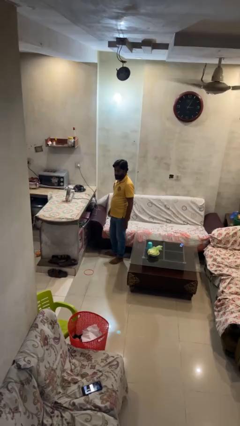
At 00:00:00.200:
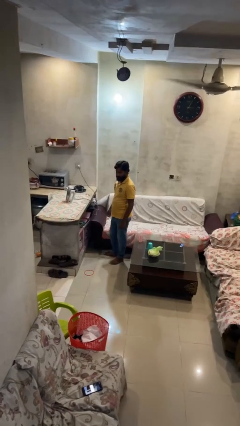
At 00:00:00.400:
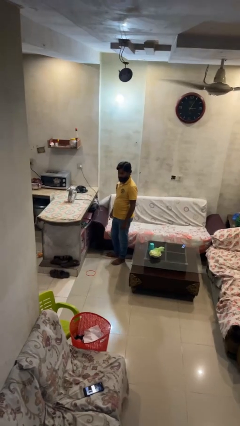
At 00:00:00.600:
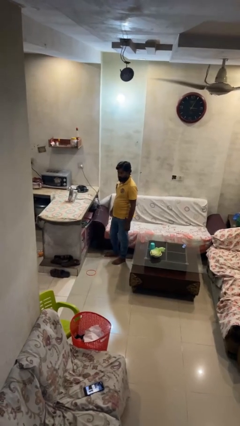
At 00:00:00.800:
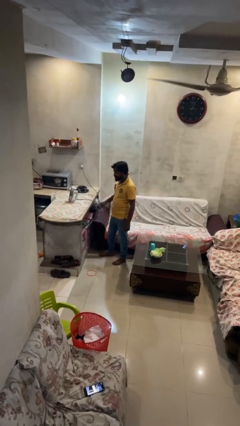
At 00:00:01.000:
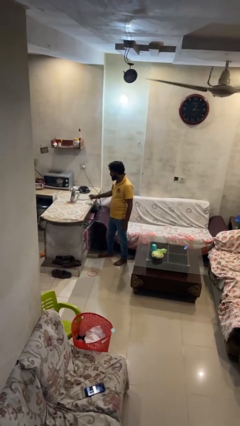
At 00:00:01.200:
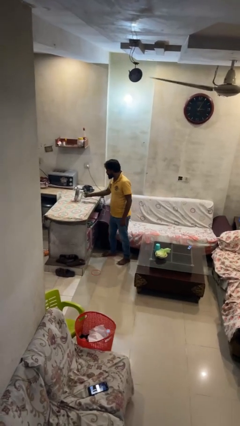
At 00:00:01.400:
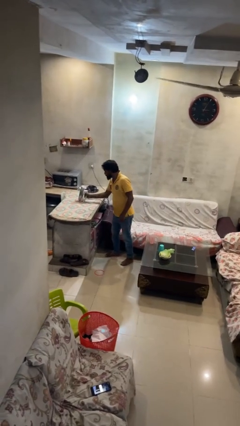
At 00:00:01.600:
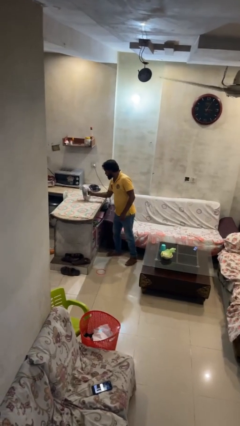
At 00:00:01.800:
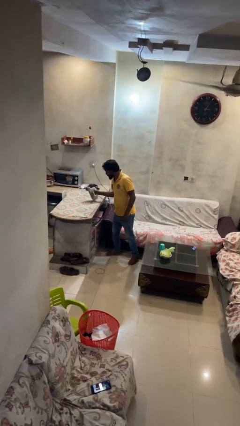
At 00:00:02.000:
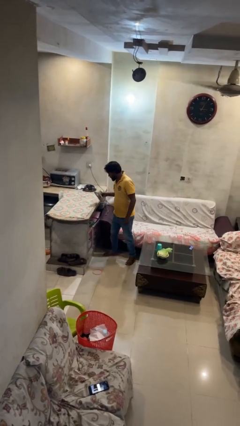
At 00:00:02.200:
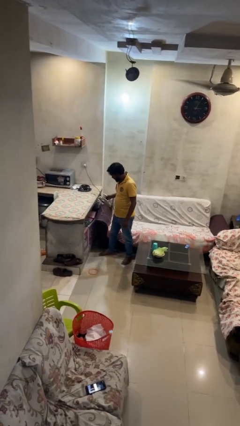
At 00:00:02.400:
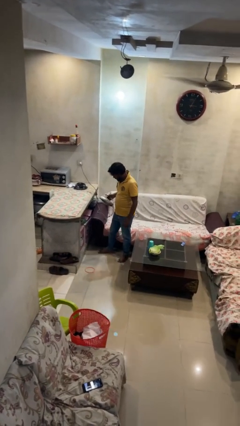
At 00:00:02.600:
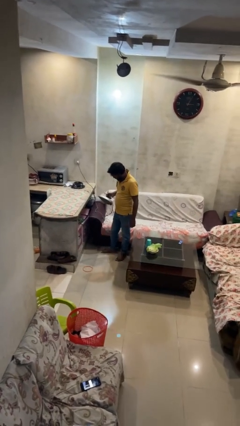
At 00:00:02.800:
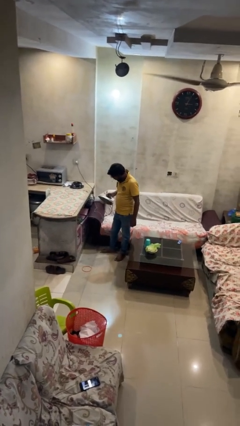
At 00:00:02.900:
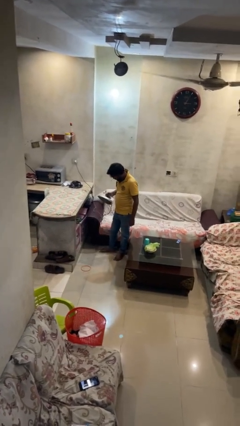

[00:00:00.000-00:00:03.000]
person picks up object from countertop

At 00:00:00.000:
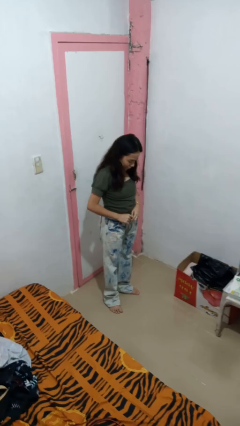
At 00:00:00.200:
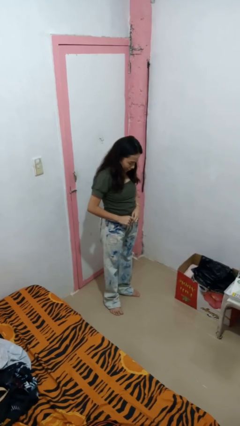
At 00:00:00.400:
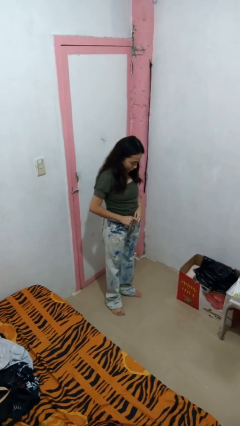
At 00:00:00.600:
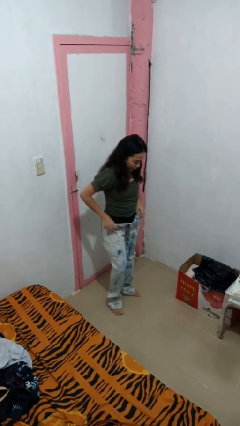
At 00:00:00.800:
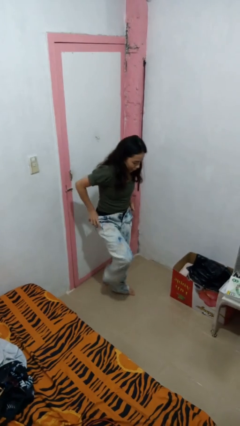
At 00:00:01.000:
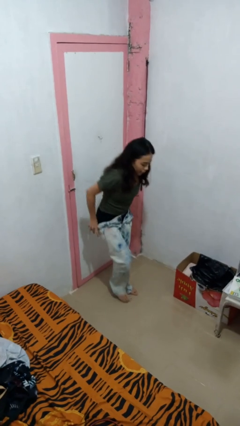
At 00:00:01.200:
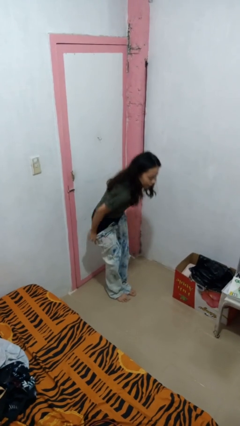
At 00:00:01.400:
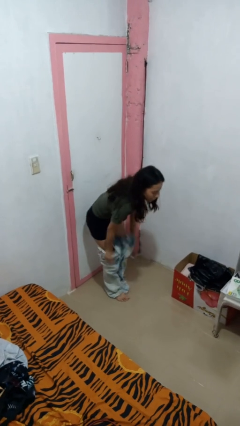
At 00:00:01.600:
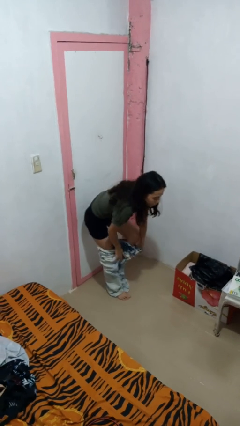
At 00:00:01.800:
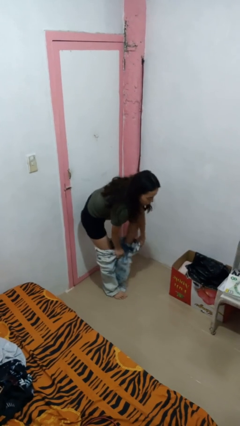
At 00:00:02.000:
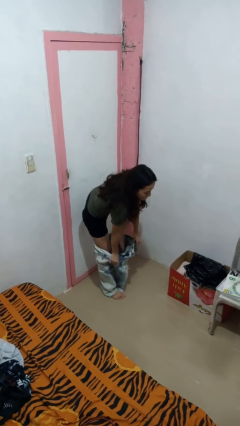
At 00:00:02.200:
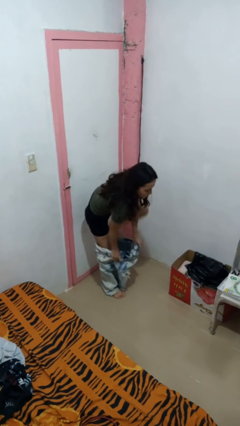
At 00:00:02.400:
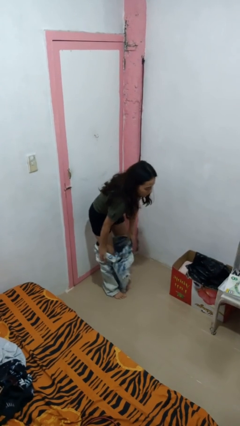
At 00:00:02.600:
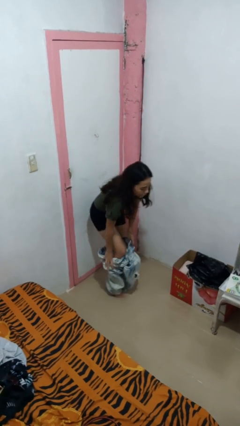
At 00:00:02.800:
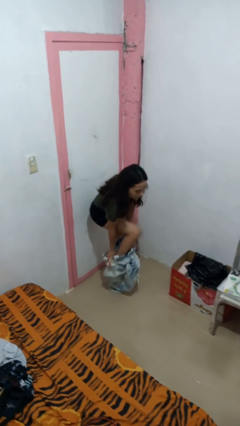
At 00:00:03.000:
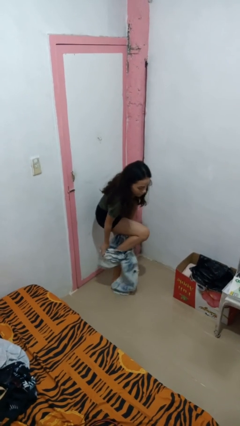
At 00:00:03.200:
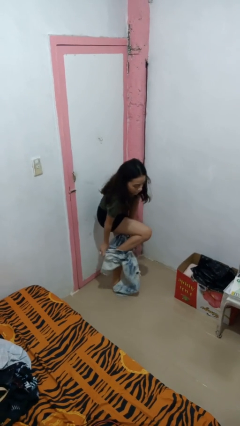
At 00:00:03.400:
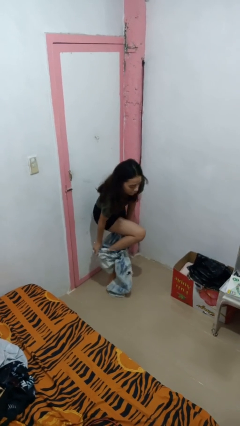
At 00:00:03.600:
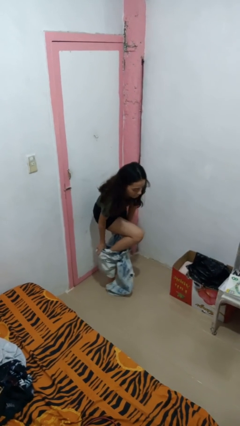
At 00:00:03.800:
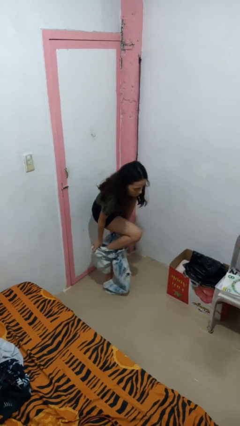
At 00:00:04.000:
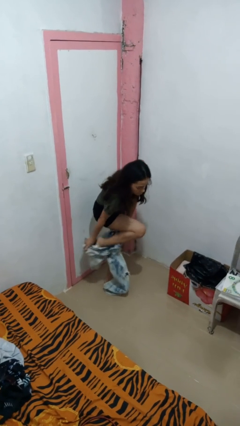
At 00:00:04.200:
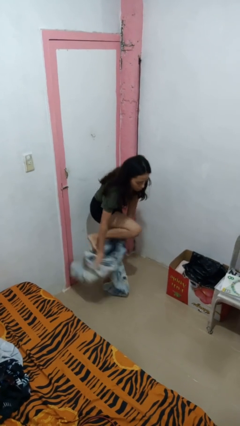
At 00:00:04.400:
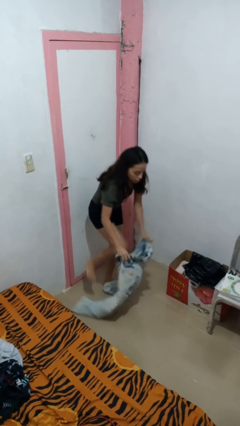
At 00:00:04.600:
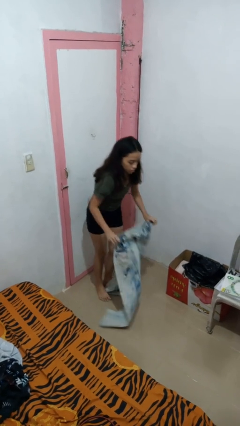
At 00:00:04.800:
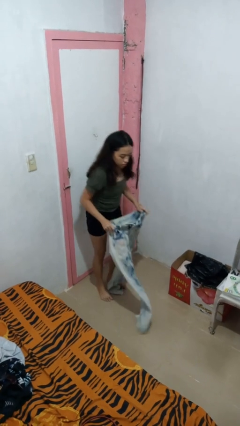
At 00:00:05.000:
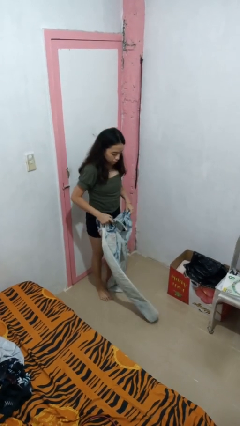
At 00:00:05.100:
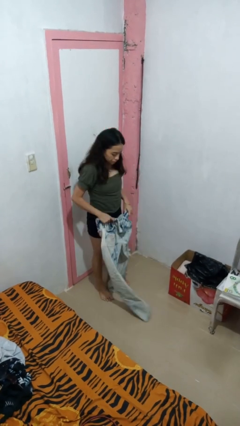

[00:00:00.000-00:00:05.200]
person takes off pants

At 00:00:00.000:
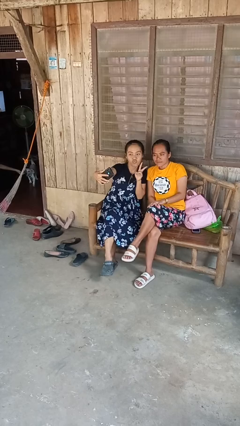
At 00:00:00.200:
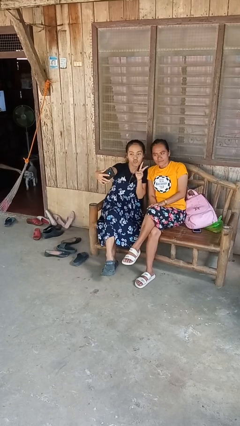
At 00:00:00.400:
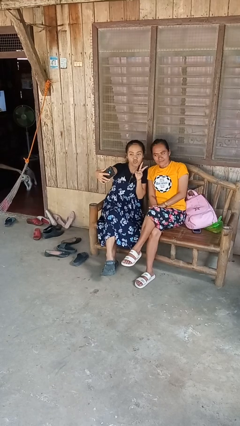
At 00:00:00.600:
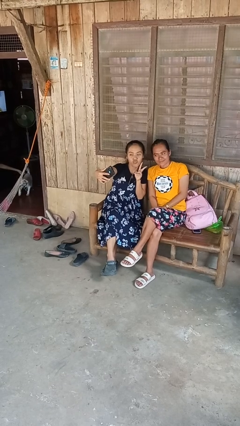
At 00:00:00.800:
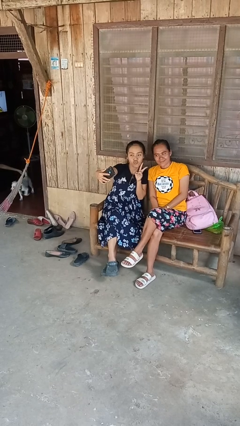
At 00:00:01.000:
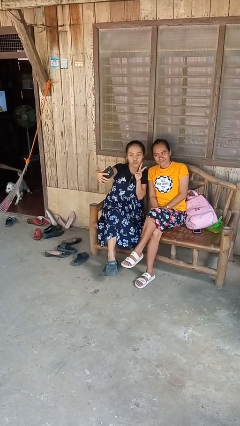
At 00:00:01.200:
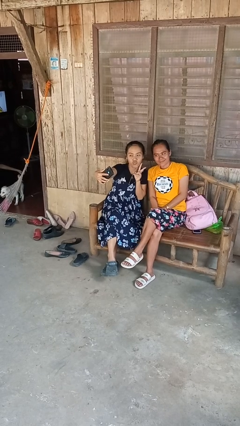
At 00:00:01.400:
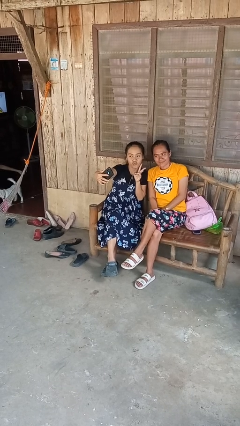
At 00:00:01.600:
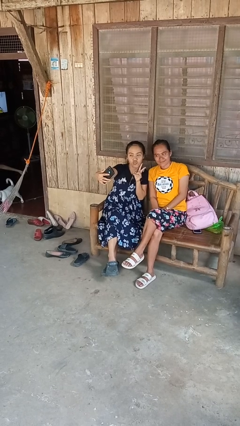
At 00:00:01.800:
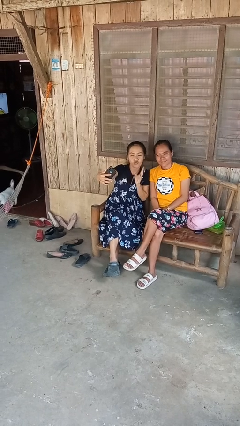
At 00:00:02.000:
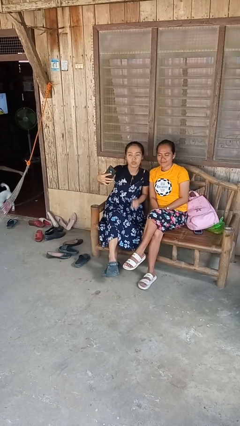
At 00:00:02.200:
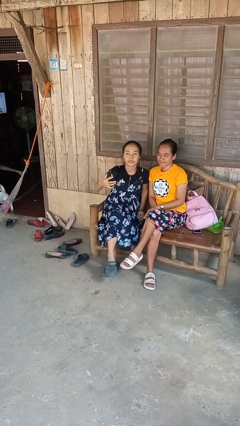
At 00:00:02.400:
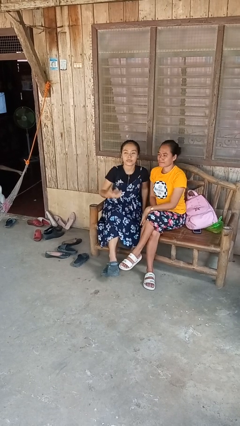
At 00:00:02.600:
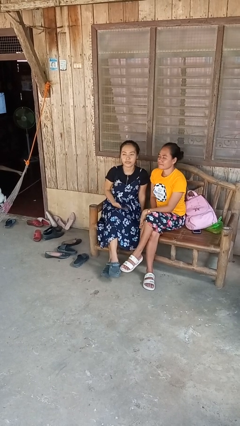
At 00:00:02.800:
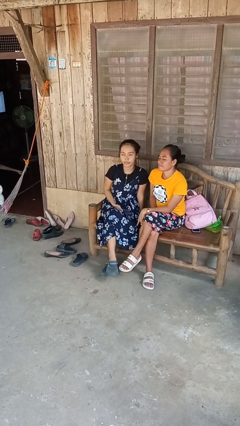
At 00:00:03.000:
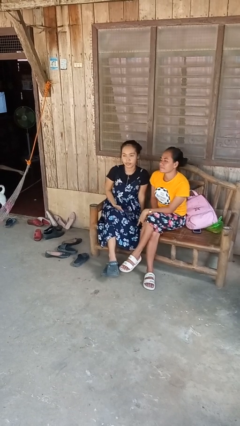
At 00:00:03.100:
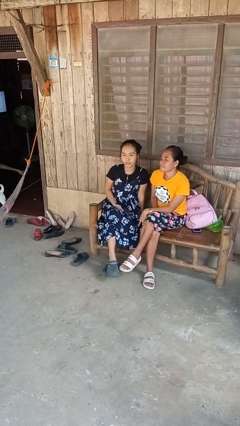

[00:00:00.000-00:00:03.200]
person takes selfie with person

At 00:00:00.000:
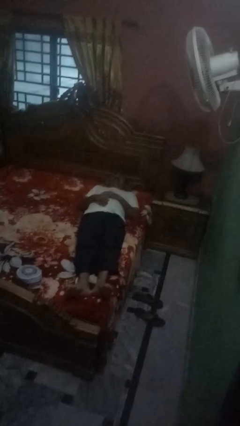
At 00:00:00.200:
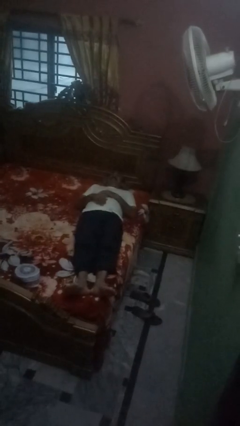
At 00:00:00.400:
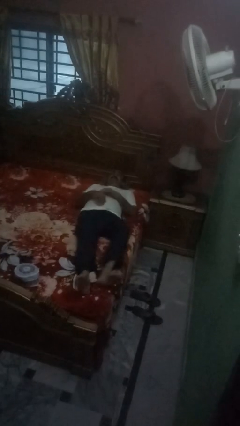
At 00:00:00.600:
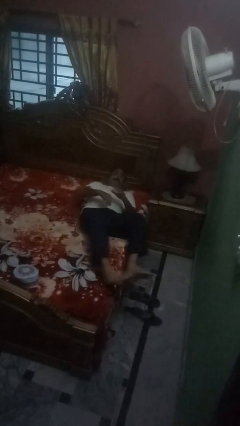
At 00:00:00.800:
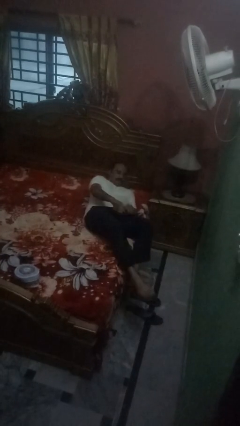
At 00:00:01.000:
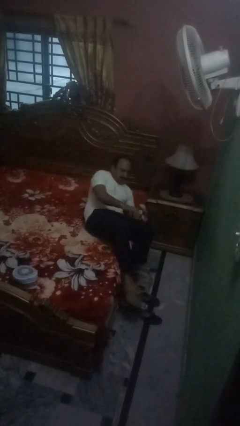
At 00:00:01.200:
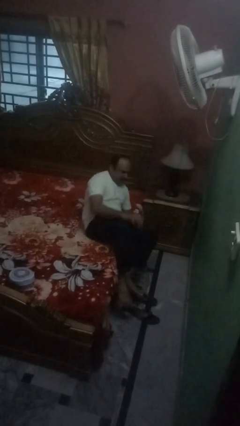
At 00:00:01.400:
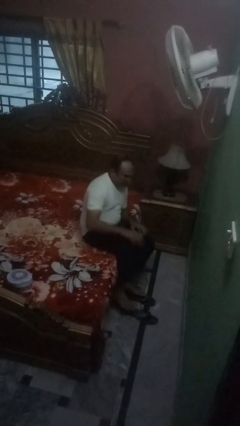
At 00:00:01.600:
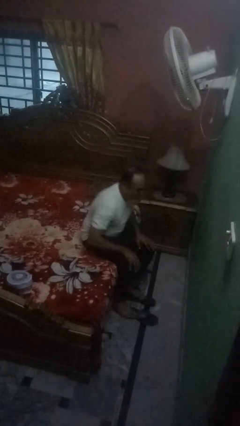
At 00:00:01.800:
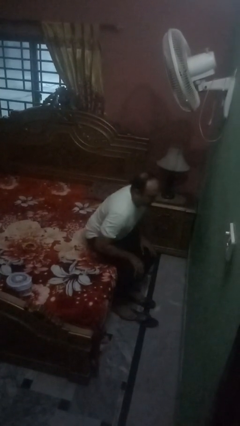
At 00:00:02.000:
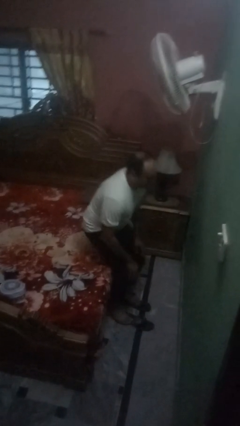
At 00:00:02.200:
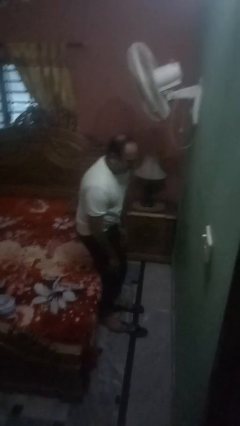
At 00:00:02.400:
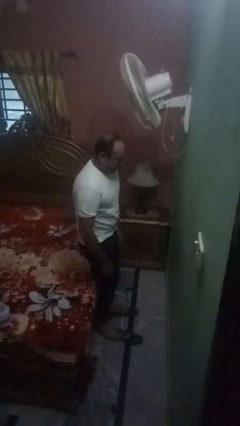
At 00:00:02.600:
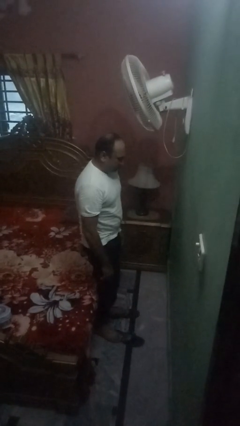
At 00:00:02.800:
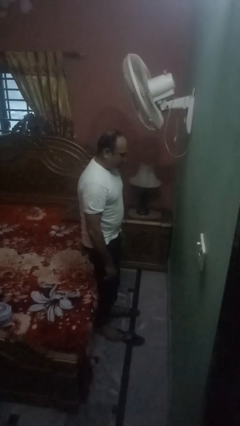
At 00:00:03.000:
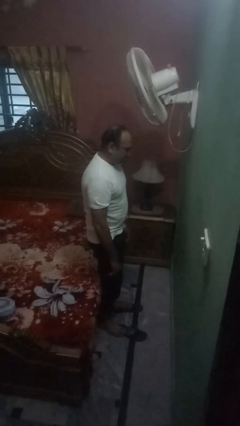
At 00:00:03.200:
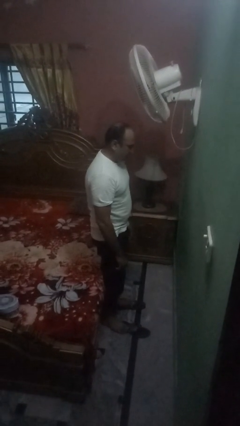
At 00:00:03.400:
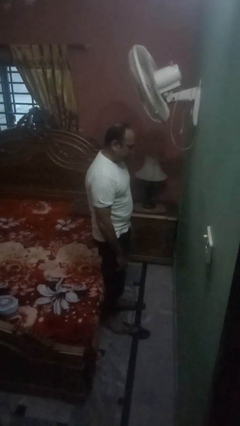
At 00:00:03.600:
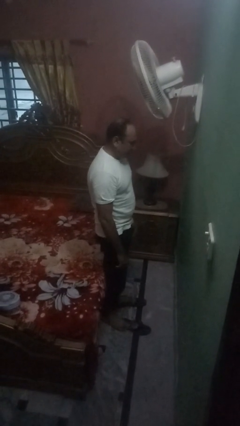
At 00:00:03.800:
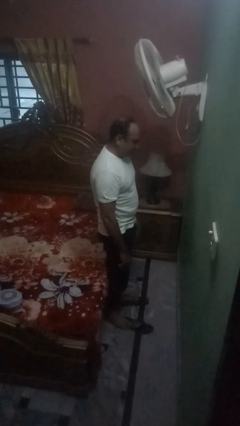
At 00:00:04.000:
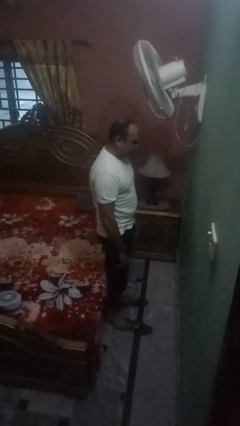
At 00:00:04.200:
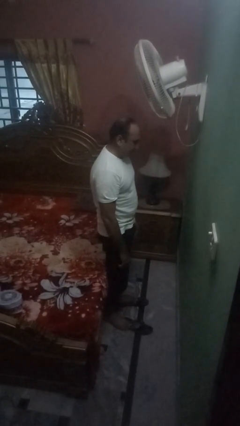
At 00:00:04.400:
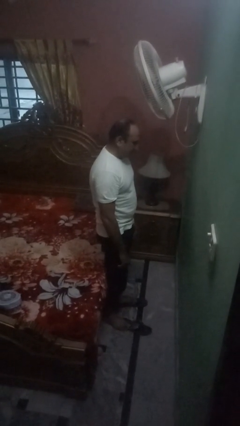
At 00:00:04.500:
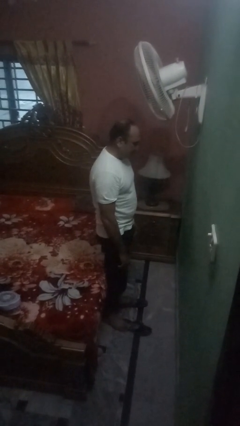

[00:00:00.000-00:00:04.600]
person stands up

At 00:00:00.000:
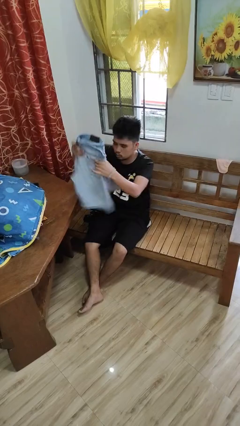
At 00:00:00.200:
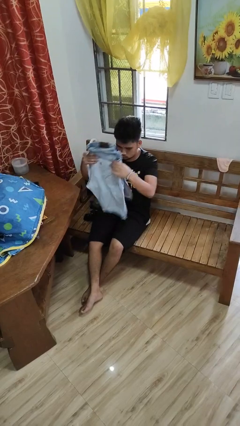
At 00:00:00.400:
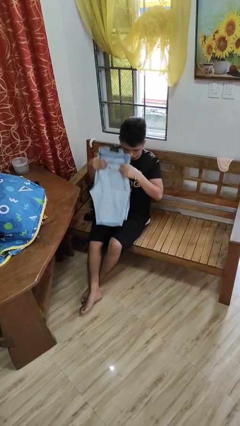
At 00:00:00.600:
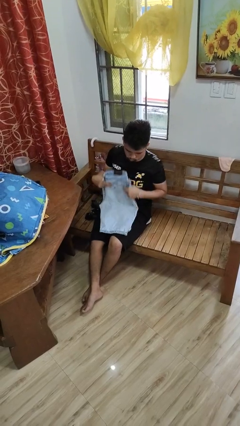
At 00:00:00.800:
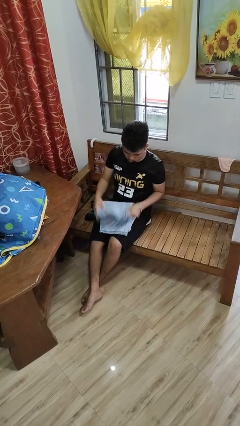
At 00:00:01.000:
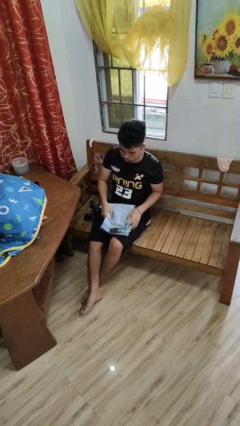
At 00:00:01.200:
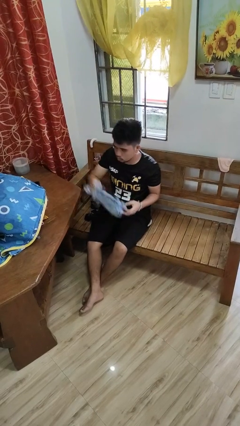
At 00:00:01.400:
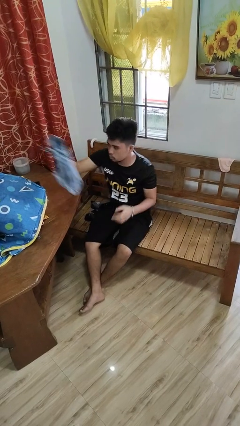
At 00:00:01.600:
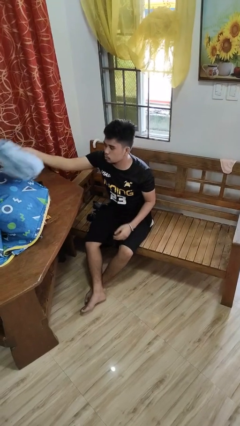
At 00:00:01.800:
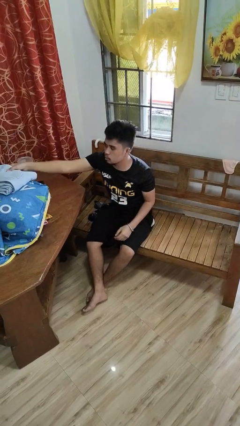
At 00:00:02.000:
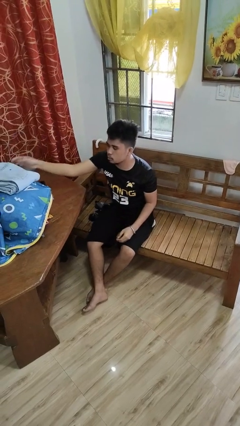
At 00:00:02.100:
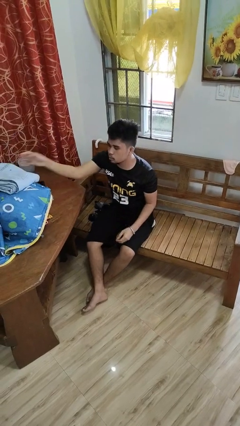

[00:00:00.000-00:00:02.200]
person folds pants
